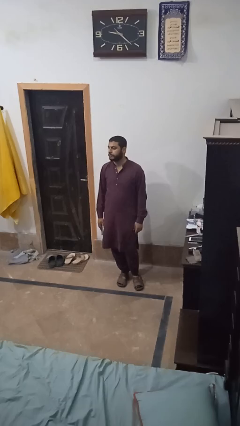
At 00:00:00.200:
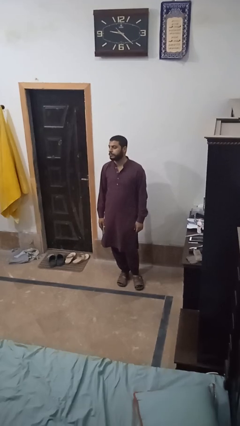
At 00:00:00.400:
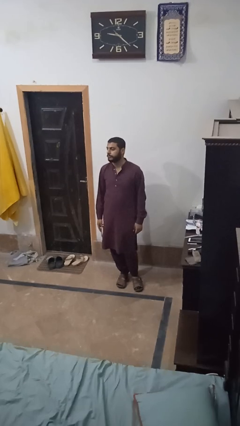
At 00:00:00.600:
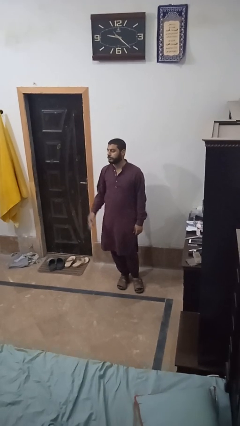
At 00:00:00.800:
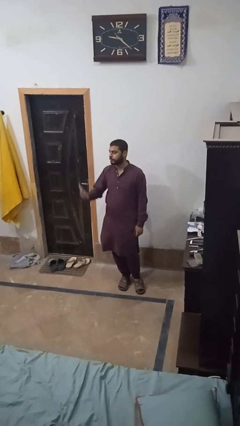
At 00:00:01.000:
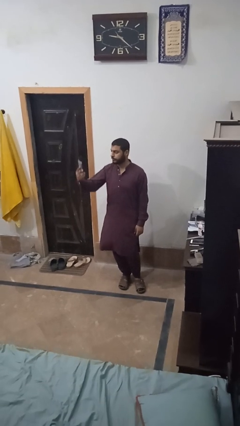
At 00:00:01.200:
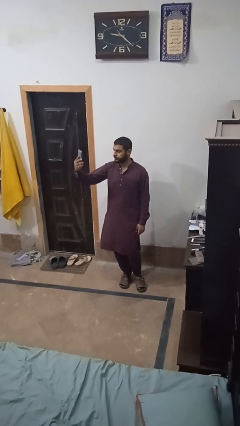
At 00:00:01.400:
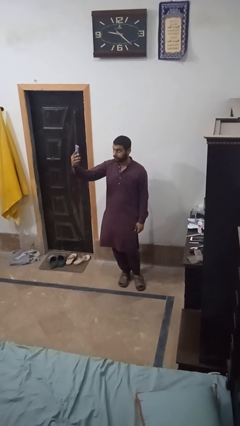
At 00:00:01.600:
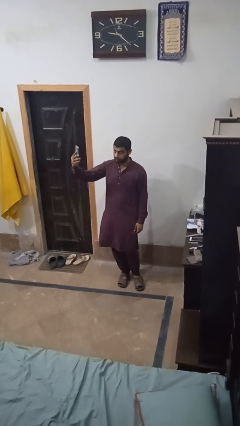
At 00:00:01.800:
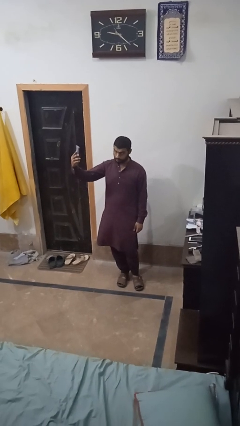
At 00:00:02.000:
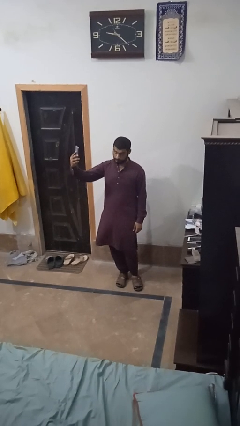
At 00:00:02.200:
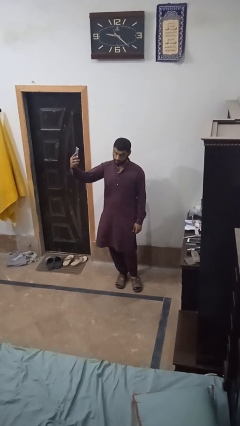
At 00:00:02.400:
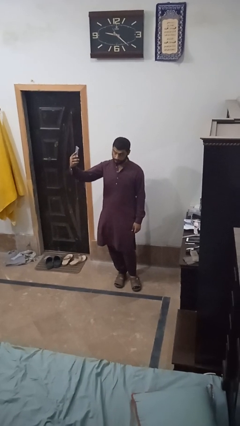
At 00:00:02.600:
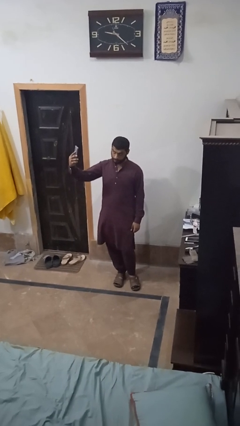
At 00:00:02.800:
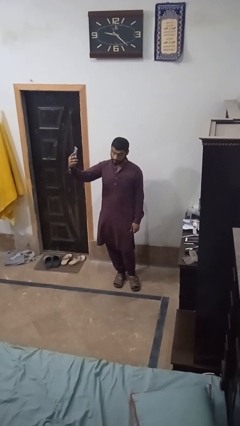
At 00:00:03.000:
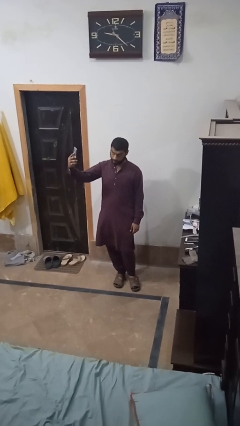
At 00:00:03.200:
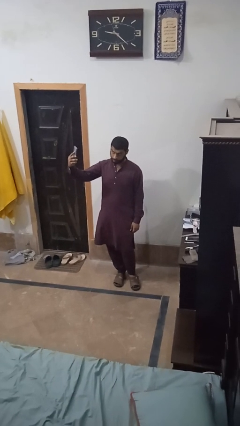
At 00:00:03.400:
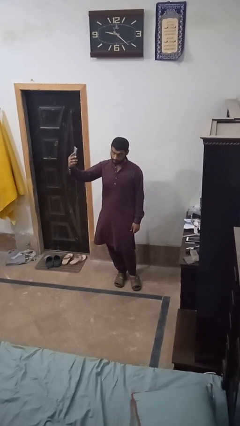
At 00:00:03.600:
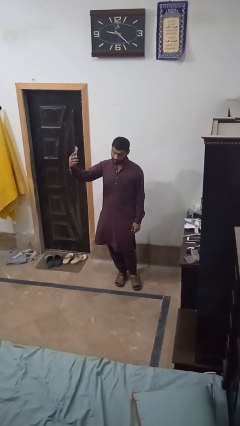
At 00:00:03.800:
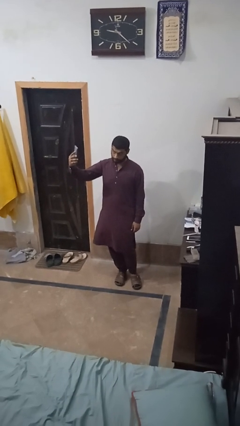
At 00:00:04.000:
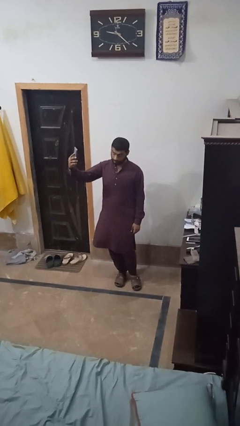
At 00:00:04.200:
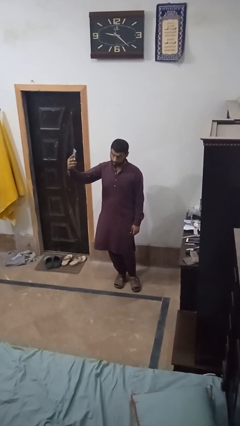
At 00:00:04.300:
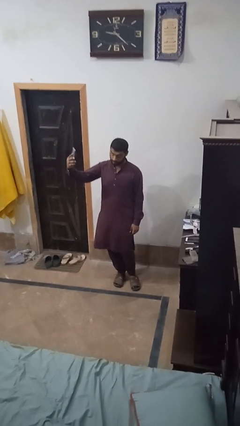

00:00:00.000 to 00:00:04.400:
person takes selfie

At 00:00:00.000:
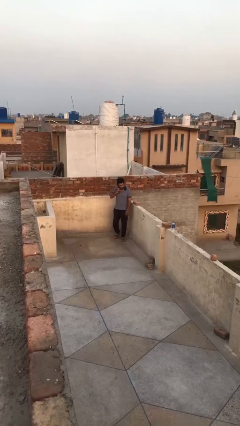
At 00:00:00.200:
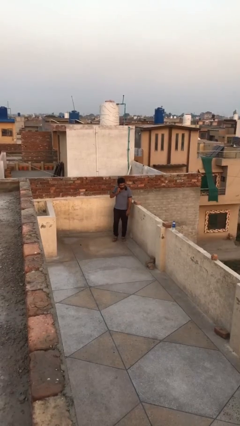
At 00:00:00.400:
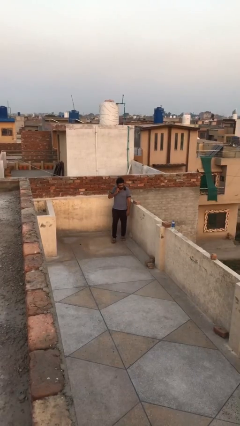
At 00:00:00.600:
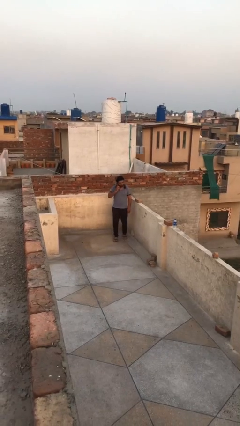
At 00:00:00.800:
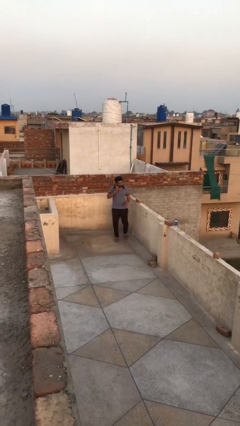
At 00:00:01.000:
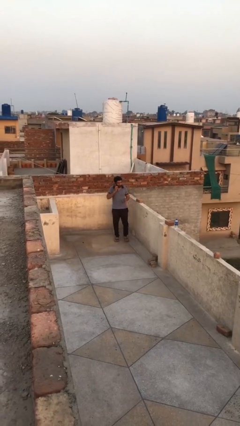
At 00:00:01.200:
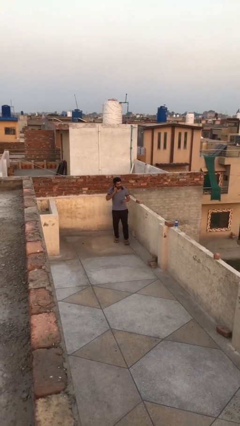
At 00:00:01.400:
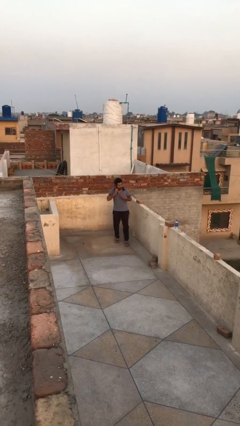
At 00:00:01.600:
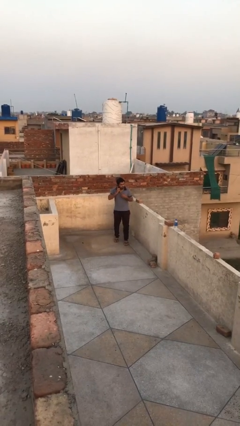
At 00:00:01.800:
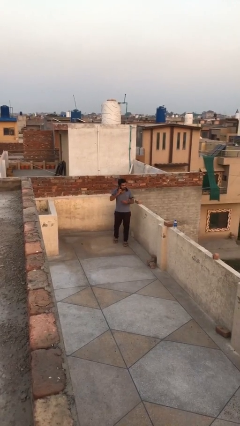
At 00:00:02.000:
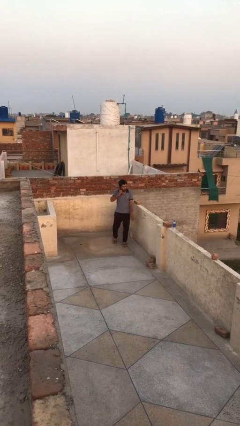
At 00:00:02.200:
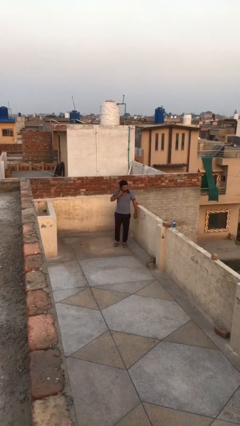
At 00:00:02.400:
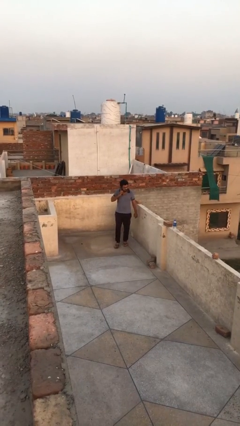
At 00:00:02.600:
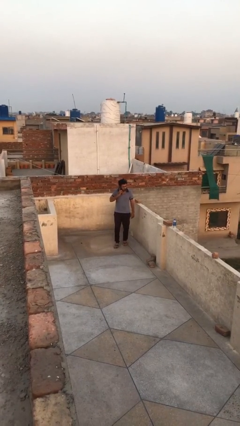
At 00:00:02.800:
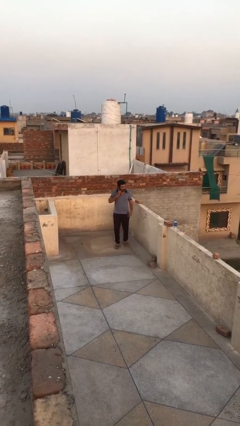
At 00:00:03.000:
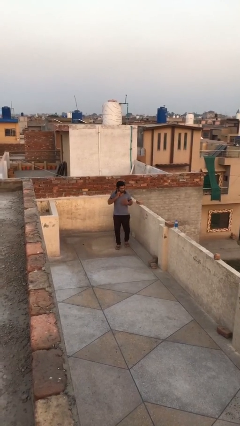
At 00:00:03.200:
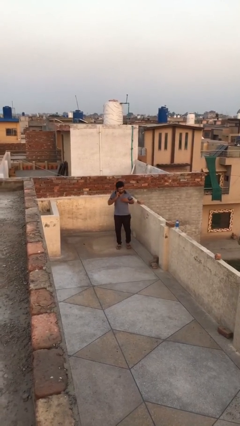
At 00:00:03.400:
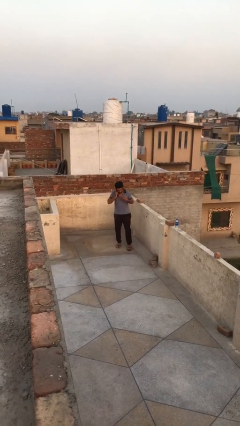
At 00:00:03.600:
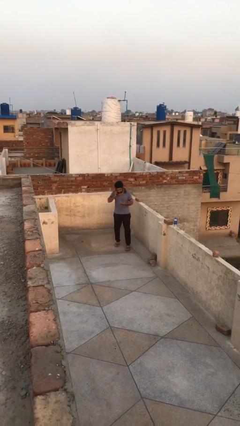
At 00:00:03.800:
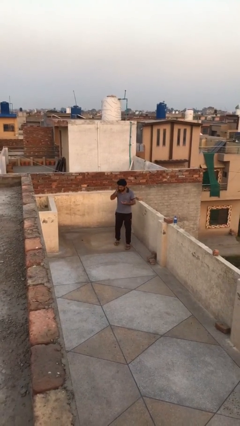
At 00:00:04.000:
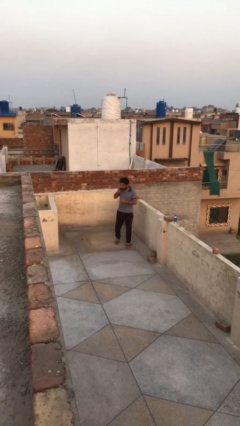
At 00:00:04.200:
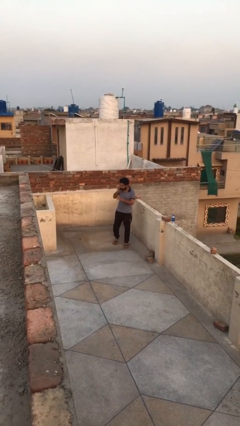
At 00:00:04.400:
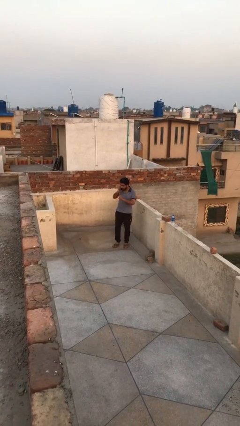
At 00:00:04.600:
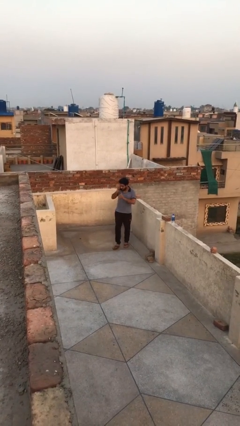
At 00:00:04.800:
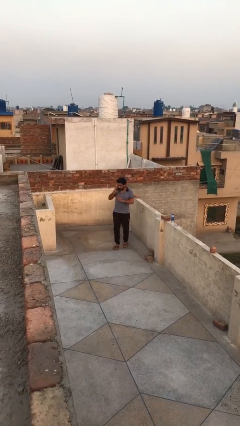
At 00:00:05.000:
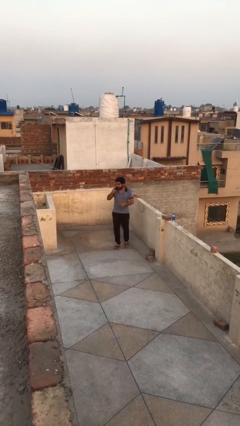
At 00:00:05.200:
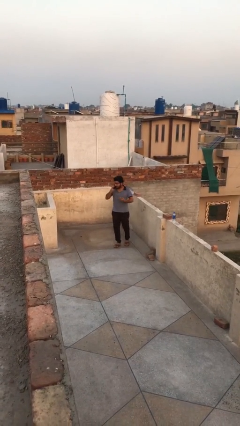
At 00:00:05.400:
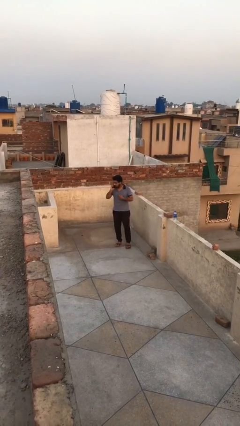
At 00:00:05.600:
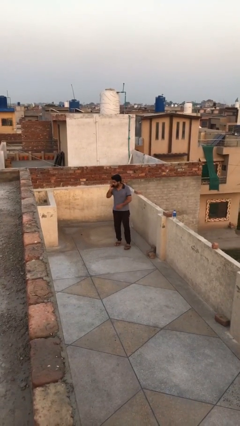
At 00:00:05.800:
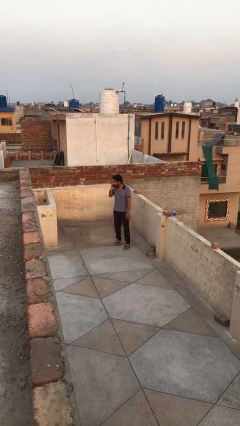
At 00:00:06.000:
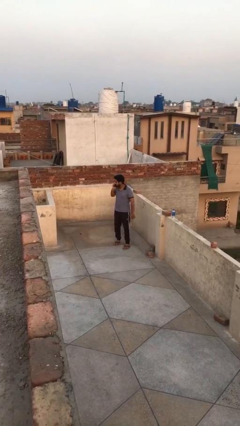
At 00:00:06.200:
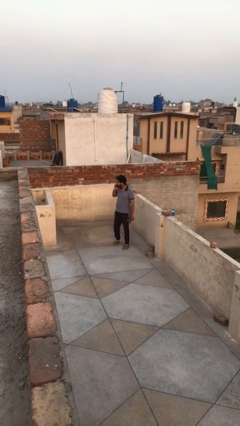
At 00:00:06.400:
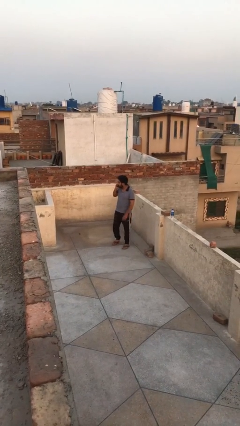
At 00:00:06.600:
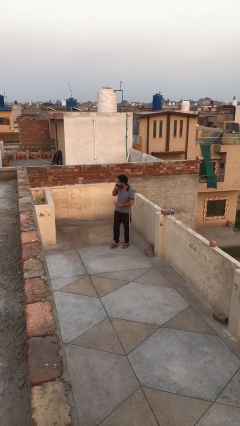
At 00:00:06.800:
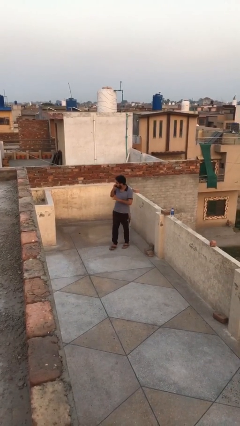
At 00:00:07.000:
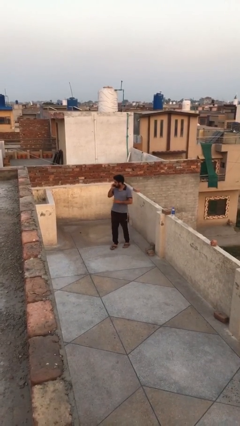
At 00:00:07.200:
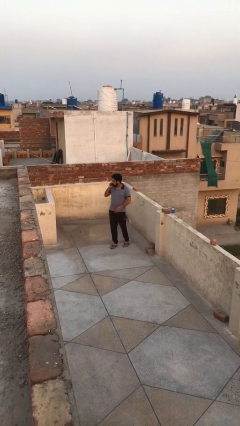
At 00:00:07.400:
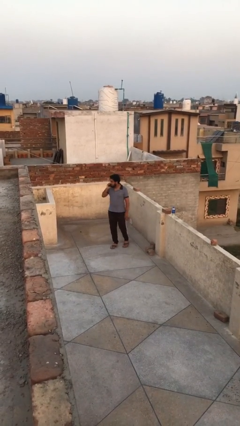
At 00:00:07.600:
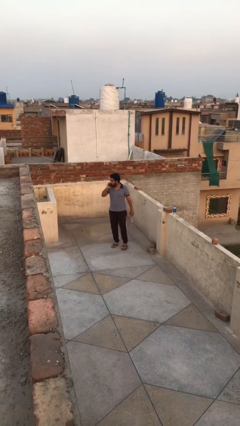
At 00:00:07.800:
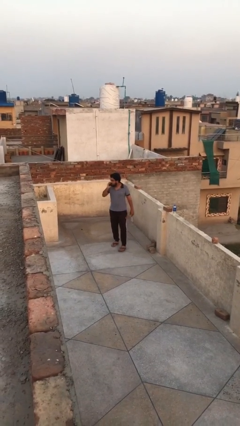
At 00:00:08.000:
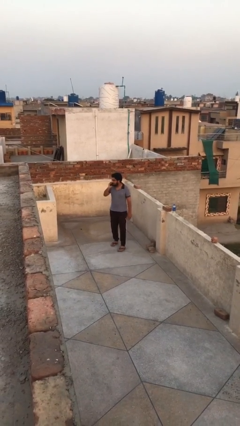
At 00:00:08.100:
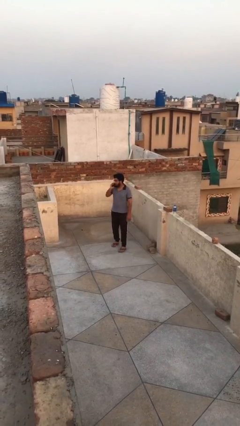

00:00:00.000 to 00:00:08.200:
person enters scene through structure

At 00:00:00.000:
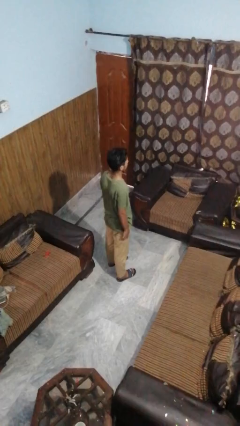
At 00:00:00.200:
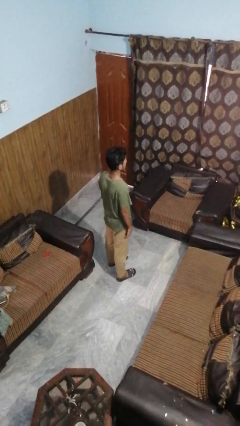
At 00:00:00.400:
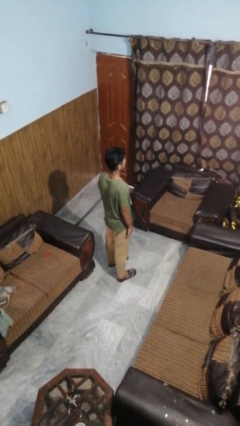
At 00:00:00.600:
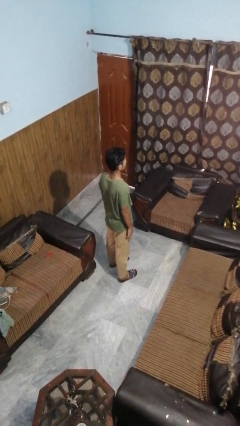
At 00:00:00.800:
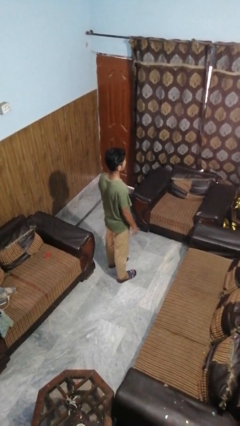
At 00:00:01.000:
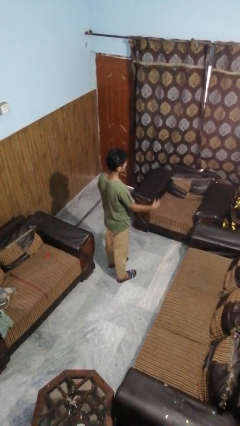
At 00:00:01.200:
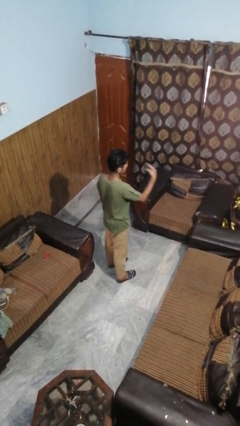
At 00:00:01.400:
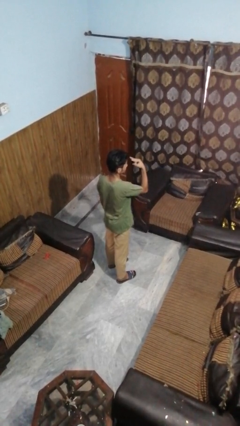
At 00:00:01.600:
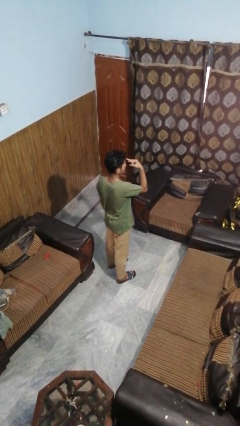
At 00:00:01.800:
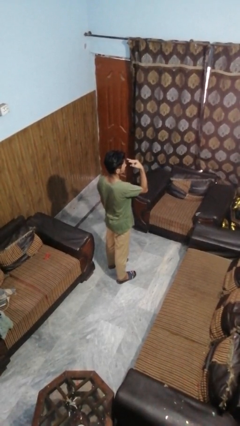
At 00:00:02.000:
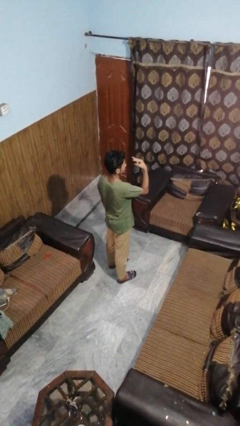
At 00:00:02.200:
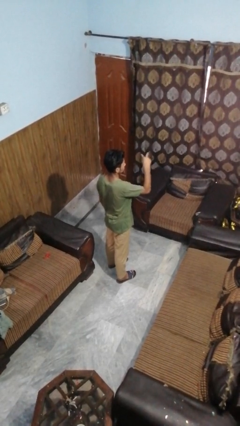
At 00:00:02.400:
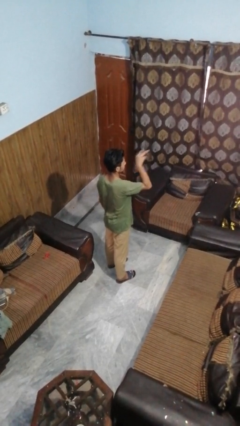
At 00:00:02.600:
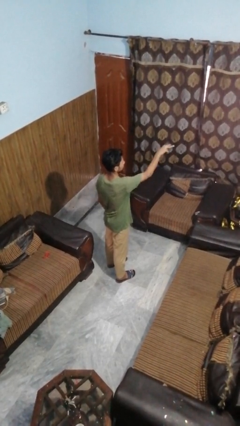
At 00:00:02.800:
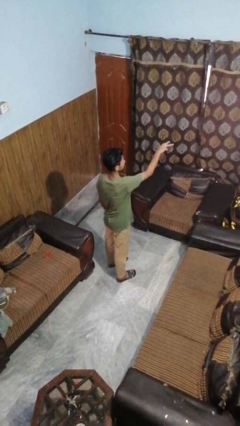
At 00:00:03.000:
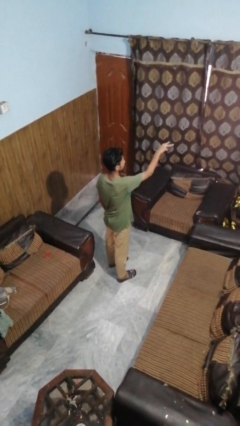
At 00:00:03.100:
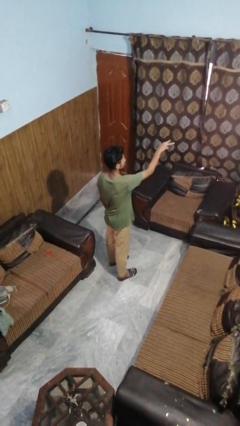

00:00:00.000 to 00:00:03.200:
person gestures watch closely

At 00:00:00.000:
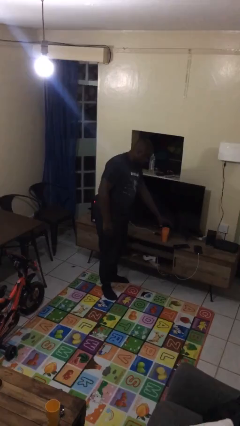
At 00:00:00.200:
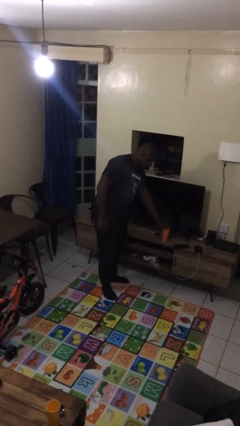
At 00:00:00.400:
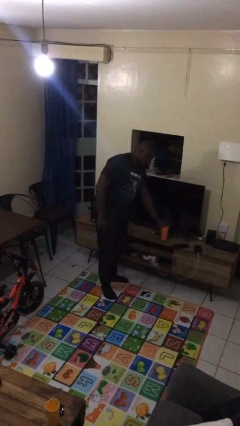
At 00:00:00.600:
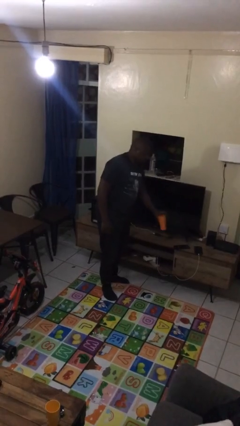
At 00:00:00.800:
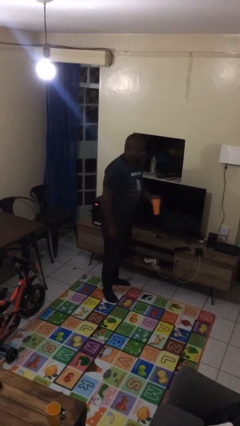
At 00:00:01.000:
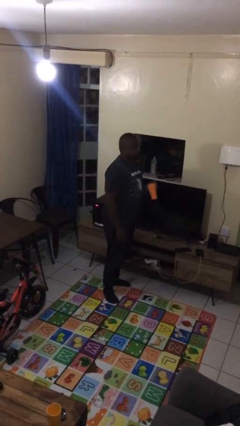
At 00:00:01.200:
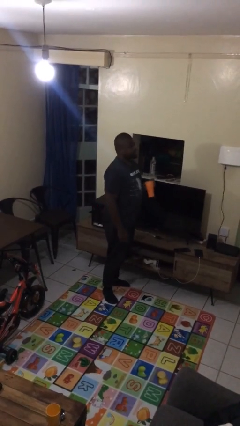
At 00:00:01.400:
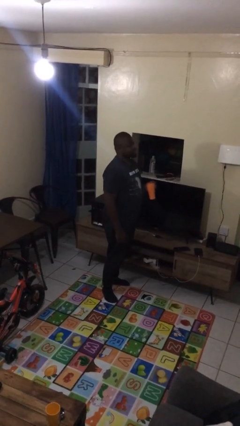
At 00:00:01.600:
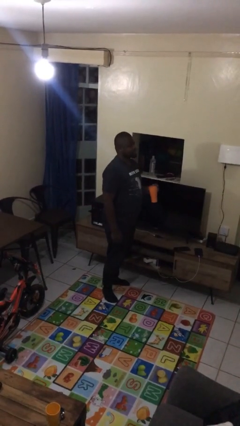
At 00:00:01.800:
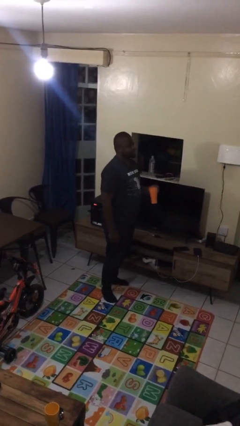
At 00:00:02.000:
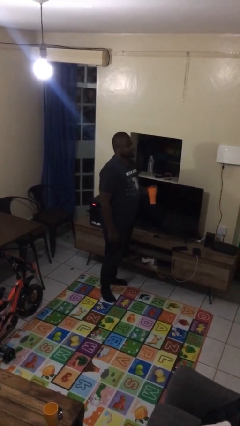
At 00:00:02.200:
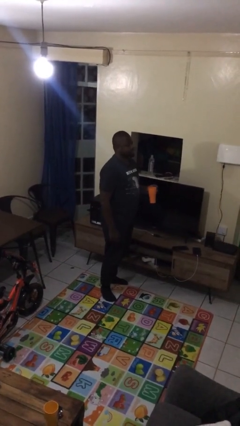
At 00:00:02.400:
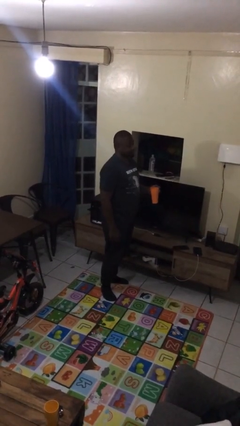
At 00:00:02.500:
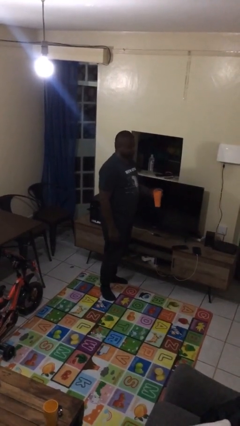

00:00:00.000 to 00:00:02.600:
person picks up object from countertop
